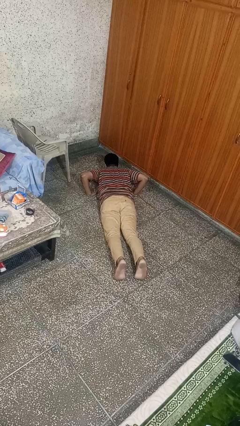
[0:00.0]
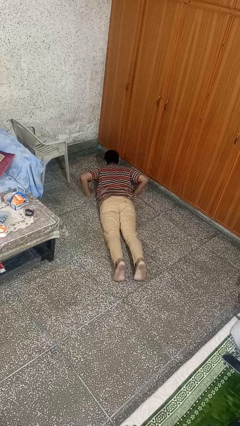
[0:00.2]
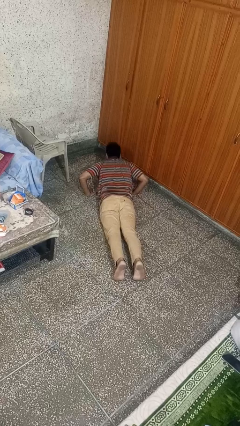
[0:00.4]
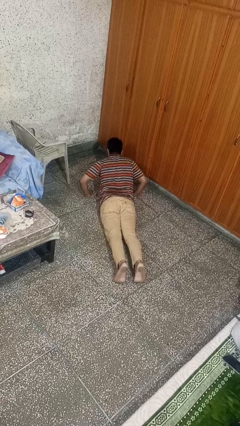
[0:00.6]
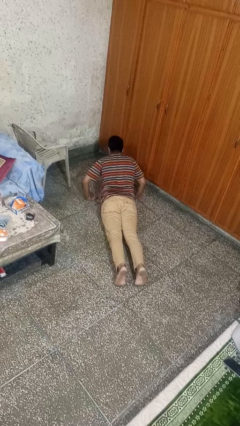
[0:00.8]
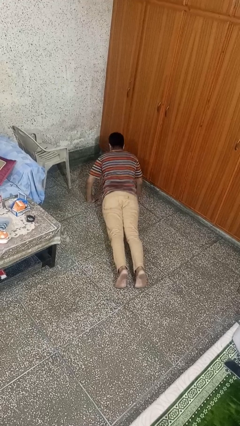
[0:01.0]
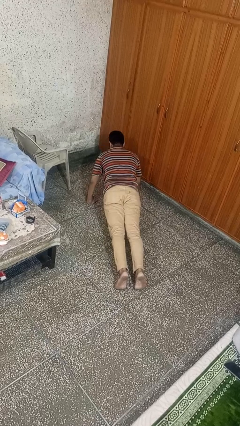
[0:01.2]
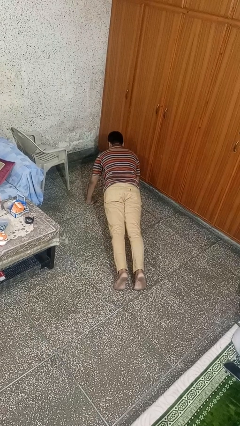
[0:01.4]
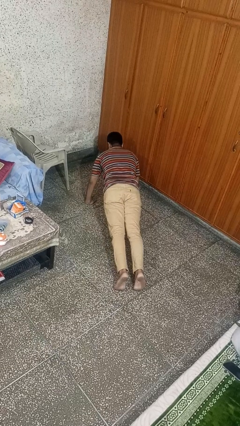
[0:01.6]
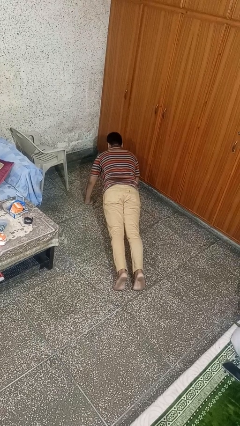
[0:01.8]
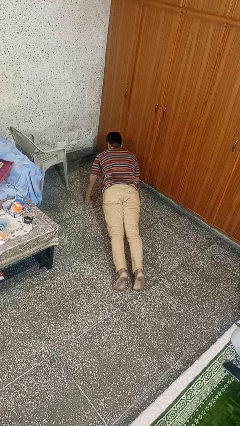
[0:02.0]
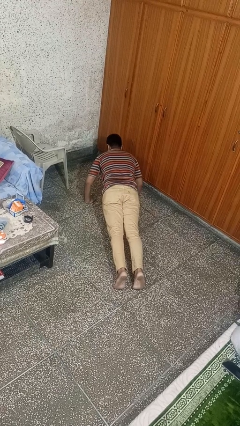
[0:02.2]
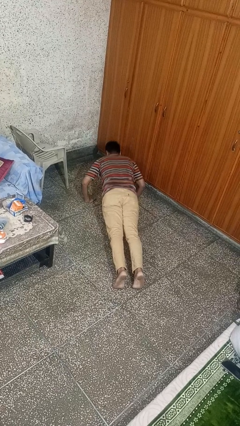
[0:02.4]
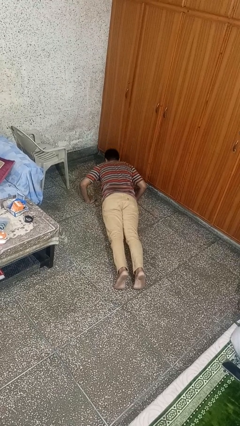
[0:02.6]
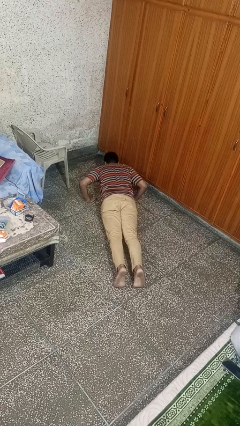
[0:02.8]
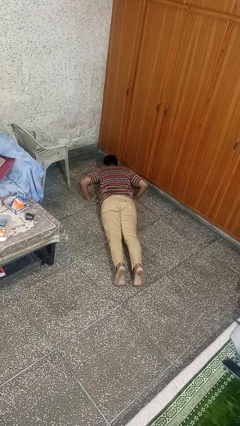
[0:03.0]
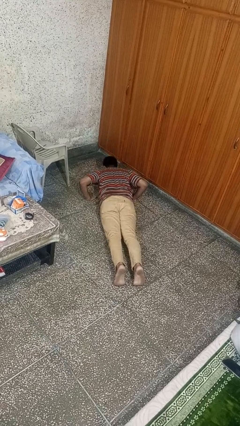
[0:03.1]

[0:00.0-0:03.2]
person exercises with pushup

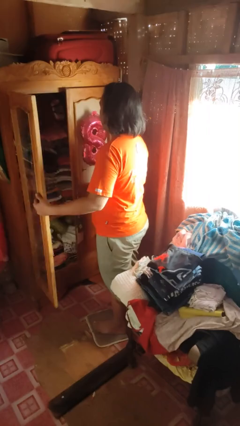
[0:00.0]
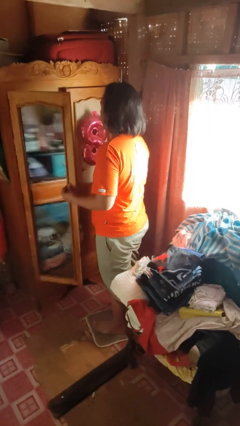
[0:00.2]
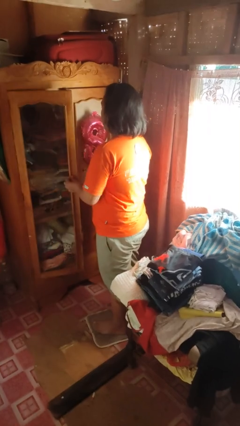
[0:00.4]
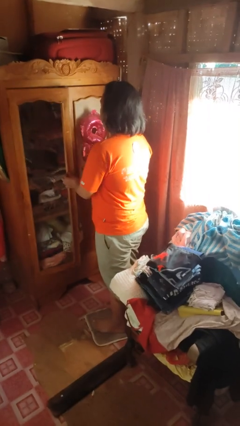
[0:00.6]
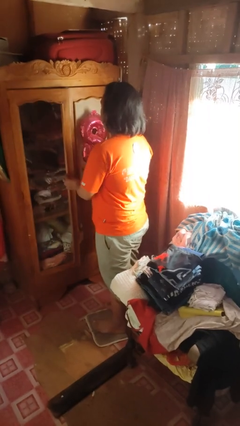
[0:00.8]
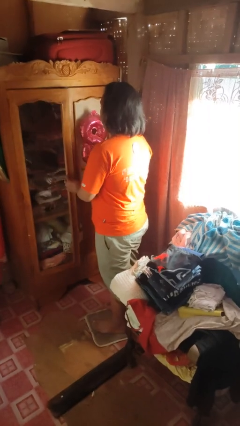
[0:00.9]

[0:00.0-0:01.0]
person closes dresser drawer

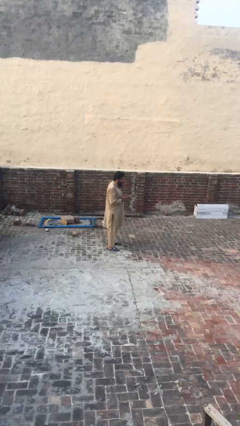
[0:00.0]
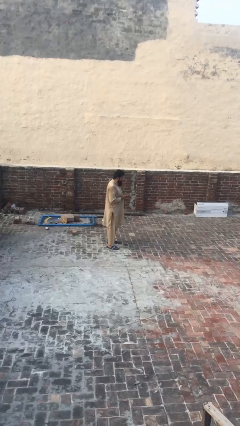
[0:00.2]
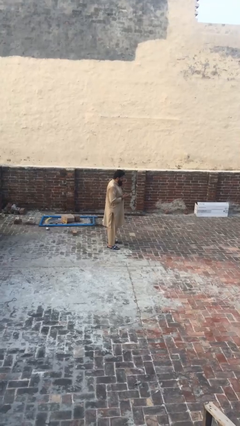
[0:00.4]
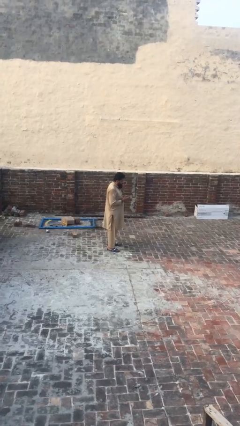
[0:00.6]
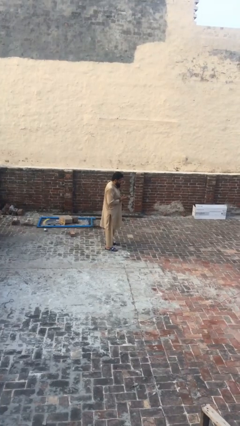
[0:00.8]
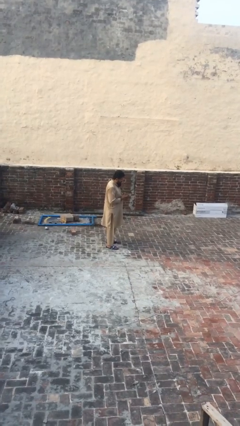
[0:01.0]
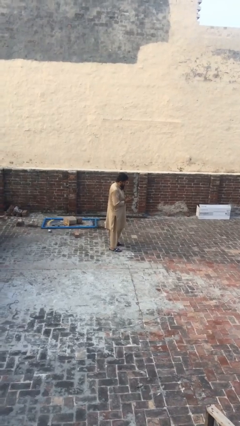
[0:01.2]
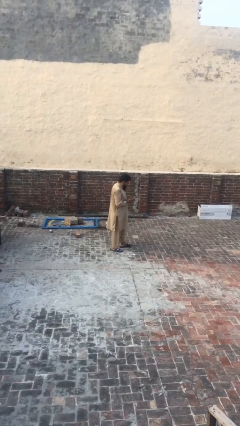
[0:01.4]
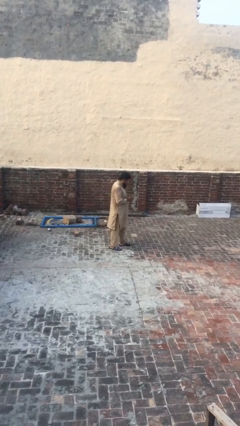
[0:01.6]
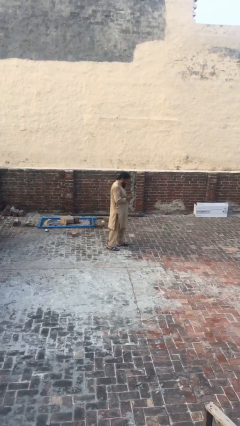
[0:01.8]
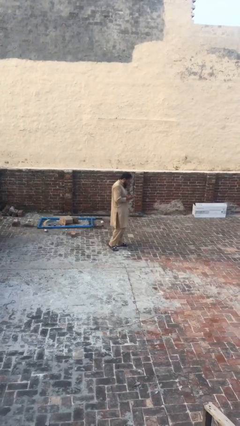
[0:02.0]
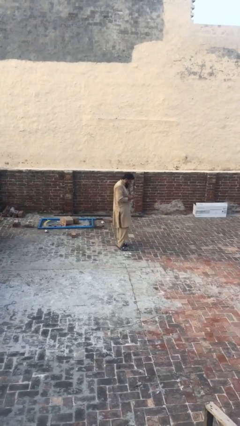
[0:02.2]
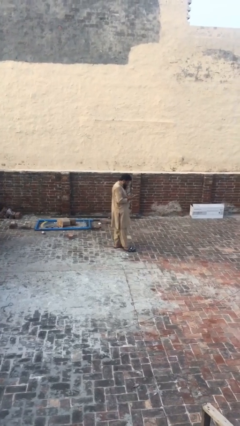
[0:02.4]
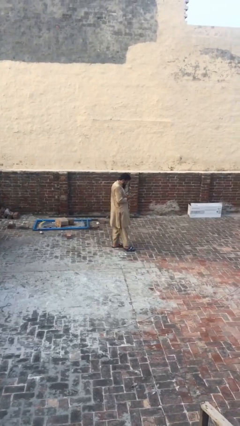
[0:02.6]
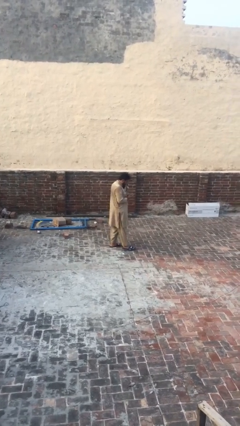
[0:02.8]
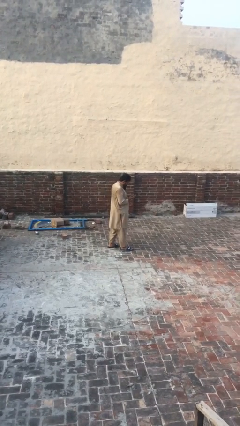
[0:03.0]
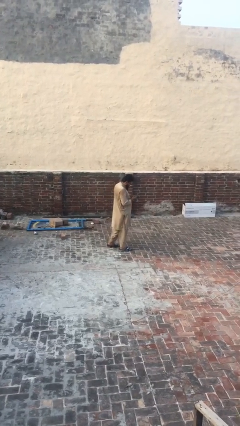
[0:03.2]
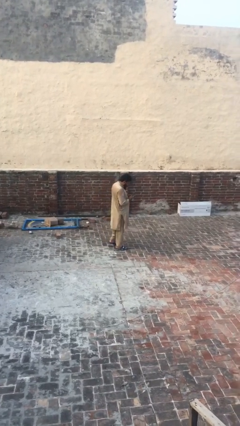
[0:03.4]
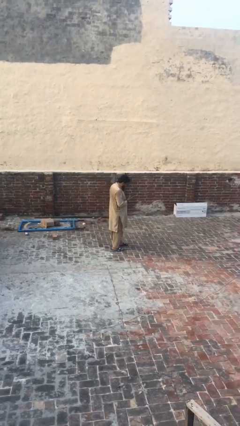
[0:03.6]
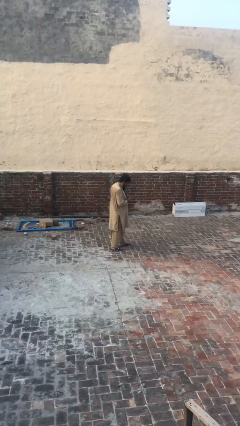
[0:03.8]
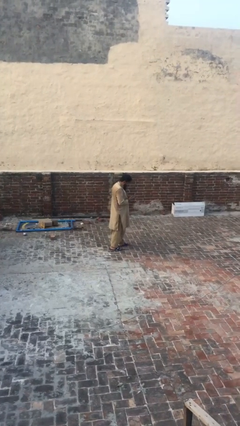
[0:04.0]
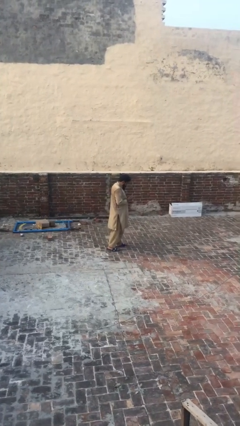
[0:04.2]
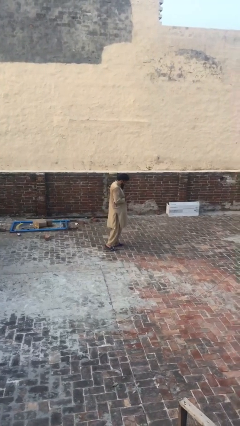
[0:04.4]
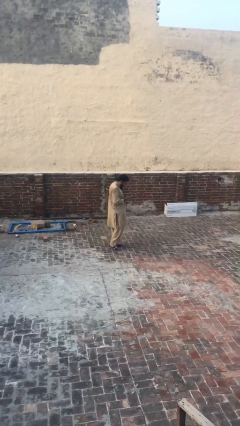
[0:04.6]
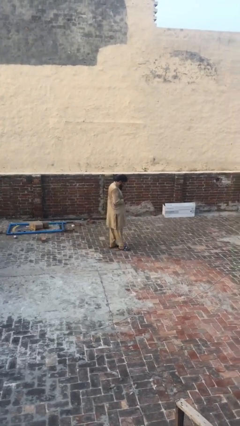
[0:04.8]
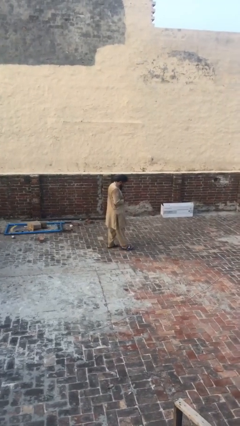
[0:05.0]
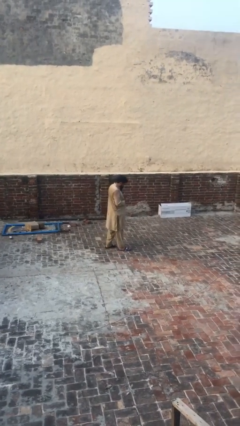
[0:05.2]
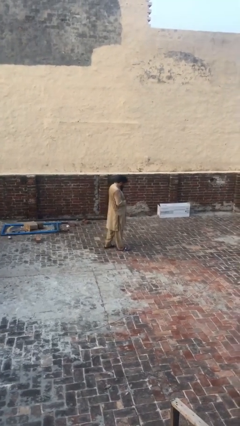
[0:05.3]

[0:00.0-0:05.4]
person texts on phone

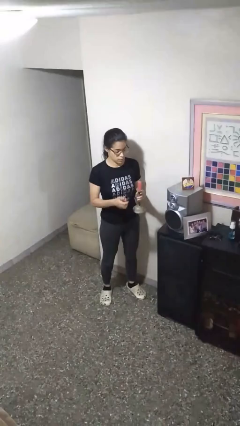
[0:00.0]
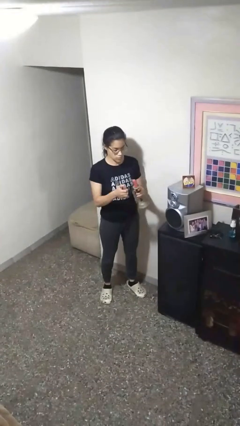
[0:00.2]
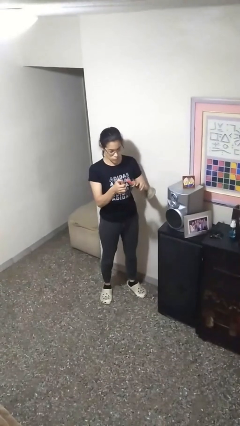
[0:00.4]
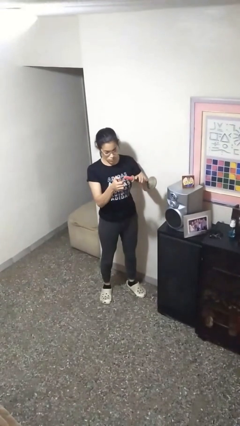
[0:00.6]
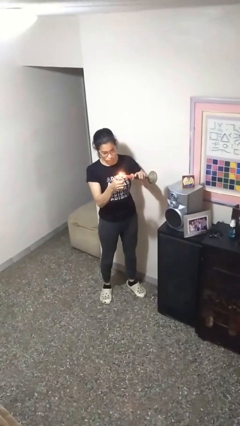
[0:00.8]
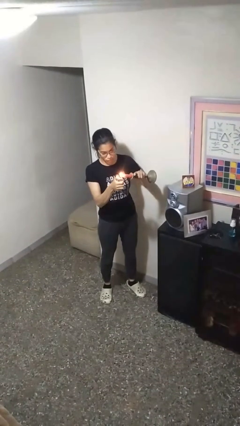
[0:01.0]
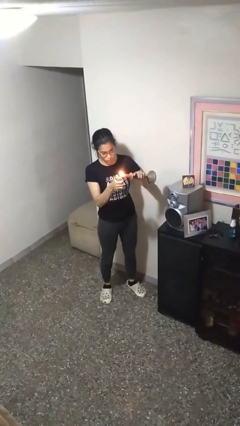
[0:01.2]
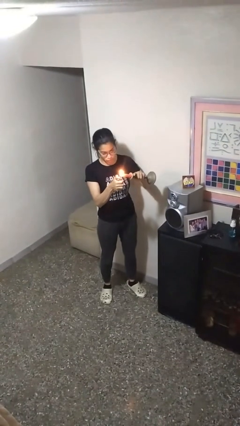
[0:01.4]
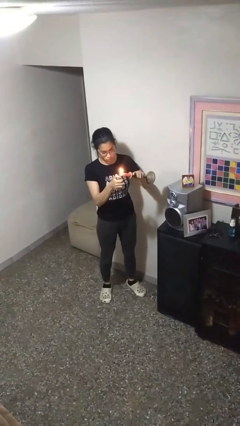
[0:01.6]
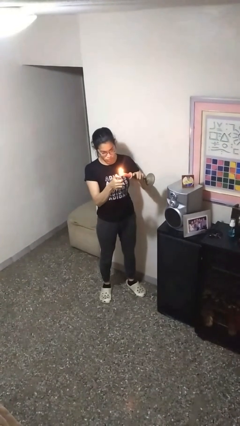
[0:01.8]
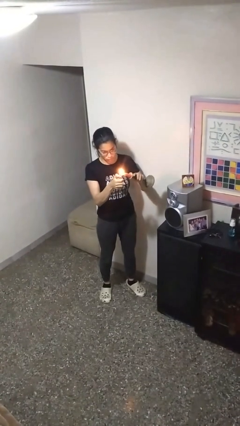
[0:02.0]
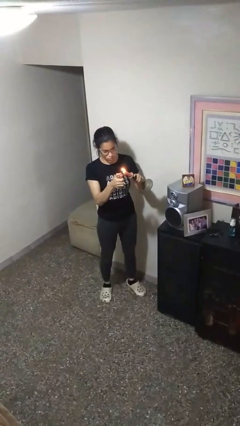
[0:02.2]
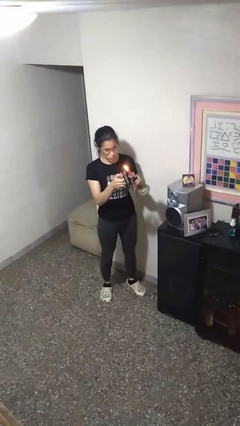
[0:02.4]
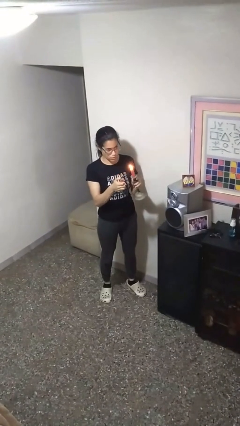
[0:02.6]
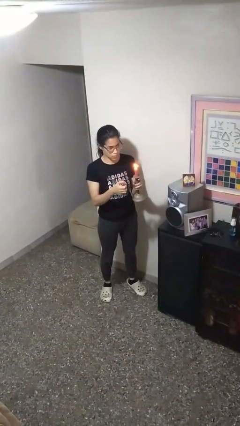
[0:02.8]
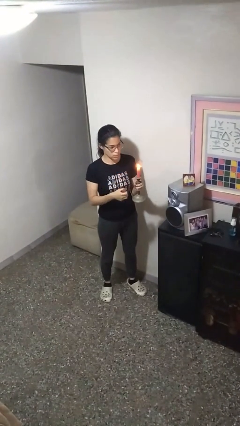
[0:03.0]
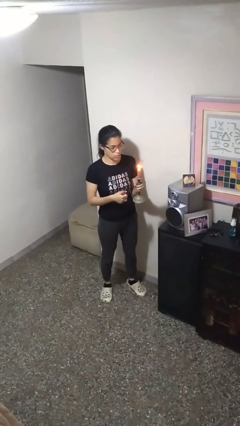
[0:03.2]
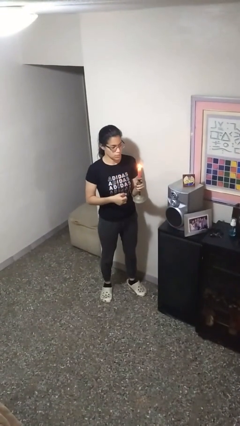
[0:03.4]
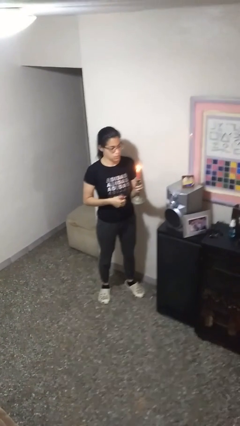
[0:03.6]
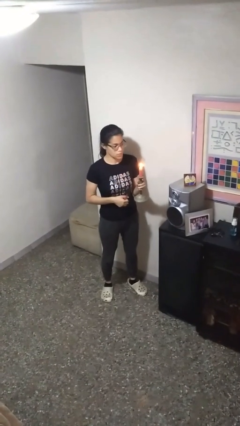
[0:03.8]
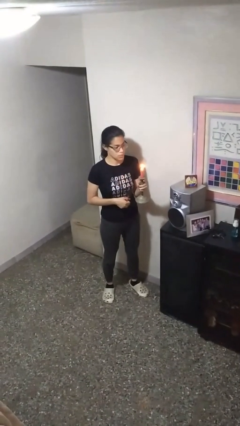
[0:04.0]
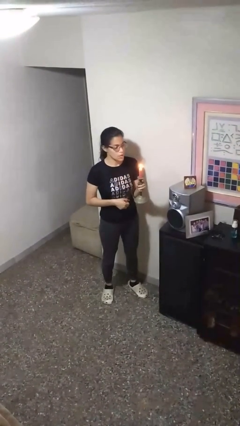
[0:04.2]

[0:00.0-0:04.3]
person lights candle

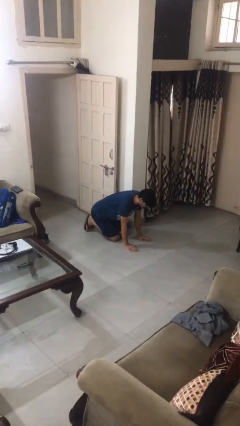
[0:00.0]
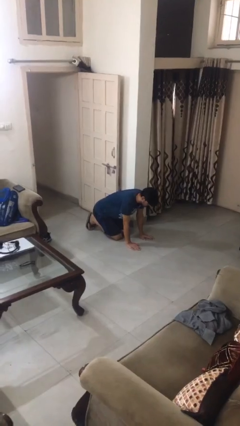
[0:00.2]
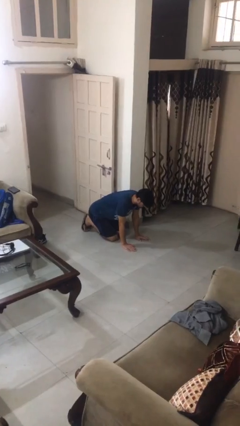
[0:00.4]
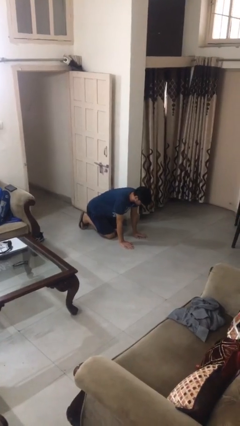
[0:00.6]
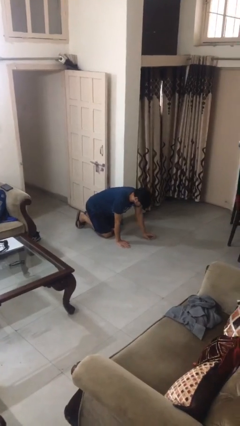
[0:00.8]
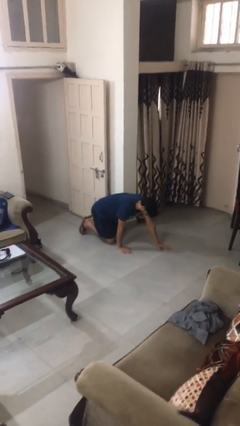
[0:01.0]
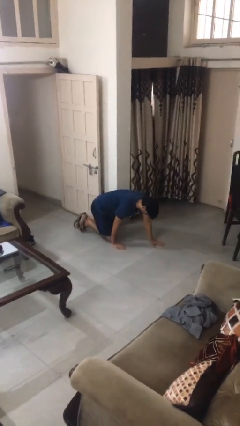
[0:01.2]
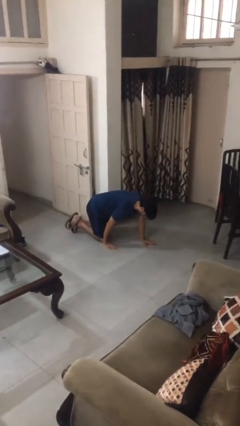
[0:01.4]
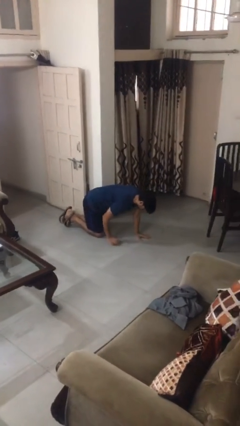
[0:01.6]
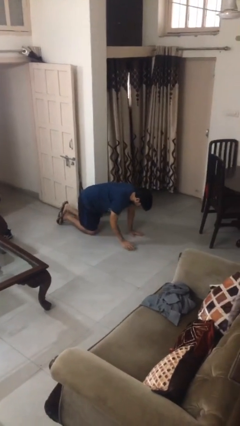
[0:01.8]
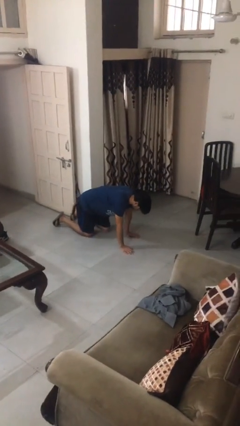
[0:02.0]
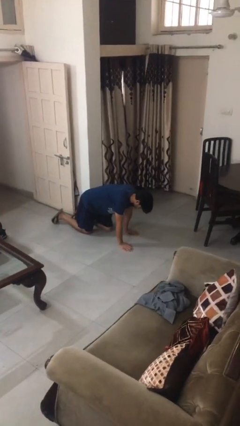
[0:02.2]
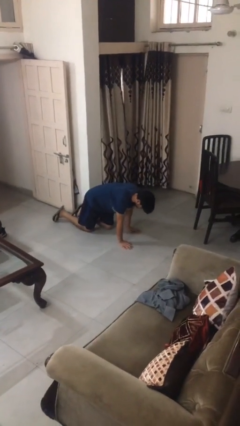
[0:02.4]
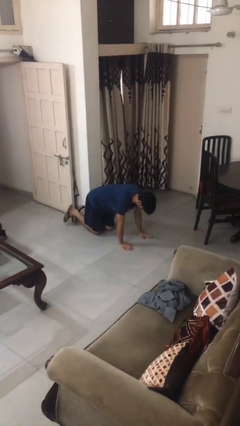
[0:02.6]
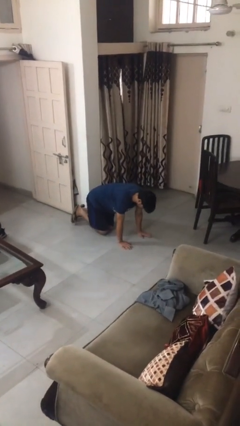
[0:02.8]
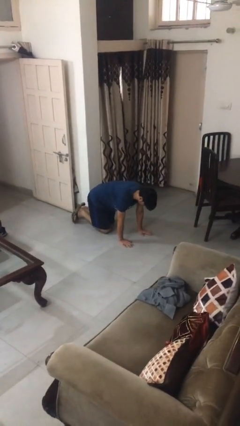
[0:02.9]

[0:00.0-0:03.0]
person crawls

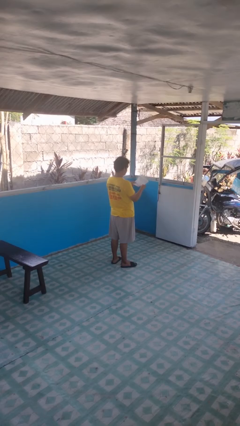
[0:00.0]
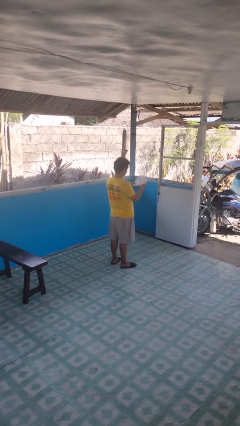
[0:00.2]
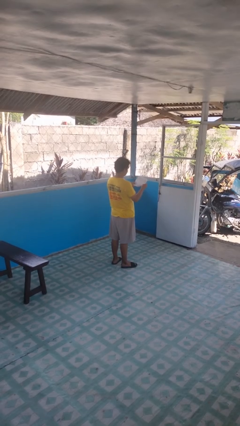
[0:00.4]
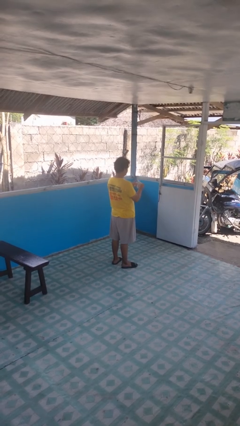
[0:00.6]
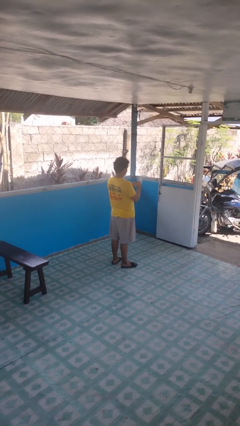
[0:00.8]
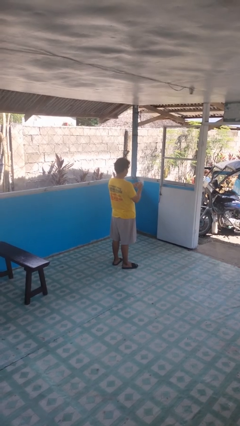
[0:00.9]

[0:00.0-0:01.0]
person crumples paper
